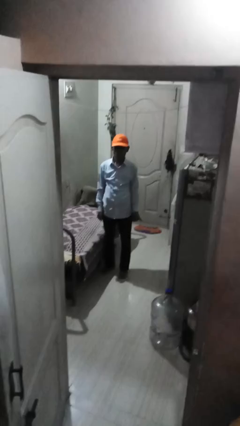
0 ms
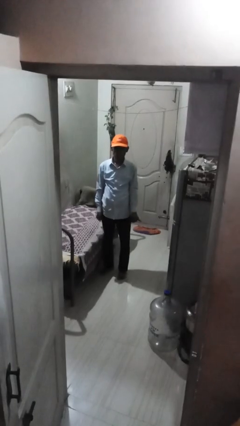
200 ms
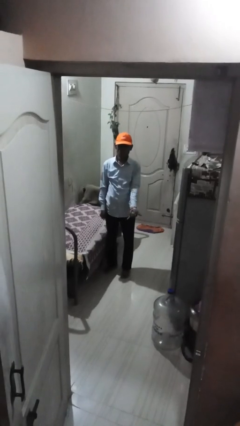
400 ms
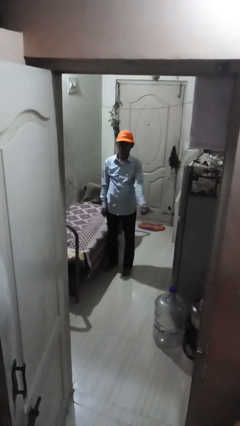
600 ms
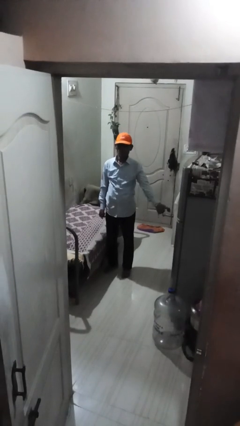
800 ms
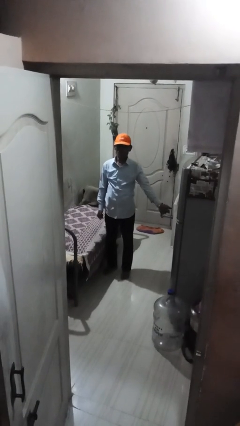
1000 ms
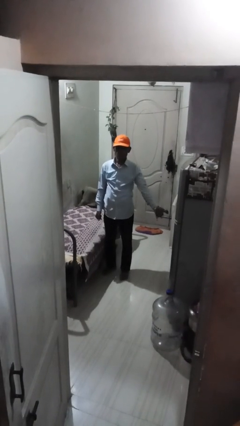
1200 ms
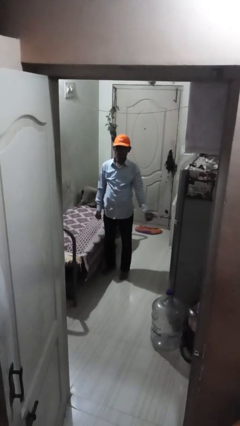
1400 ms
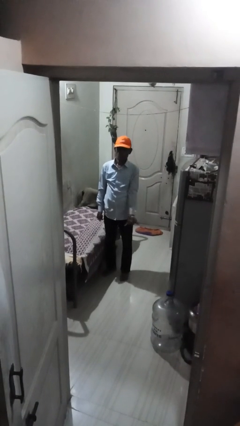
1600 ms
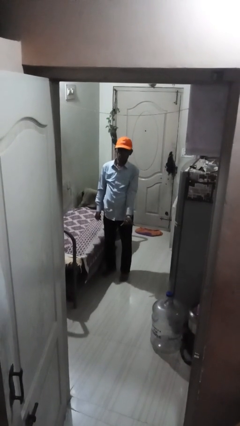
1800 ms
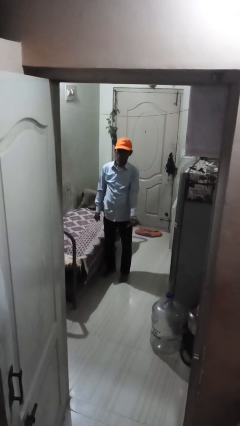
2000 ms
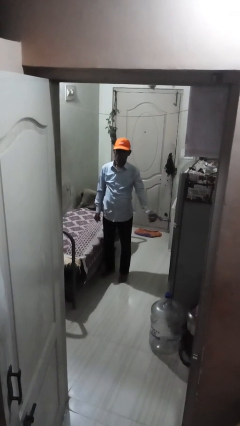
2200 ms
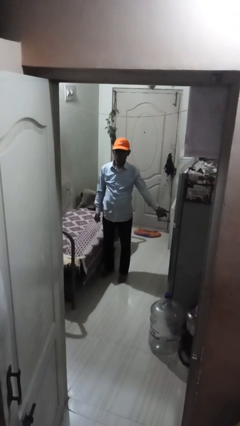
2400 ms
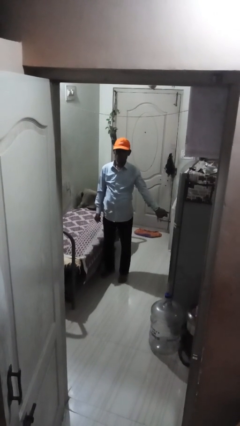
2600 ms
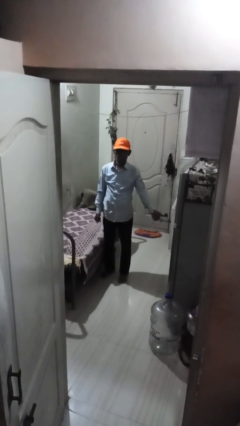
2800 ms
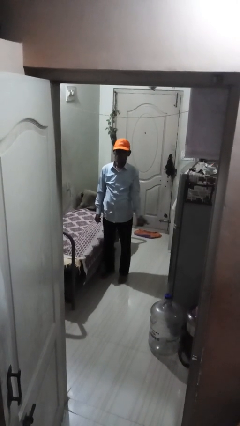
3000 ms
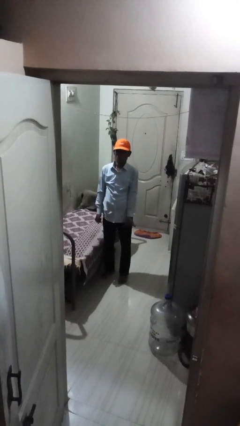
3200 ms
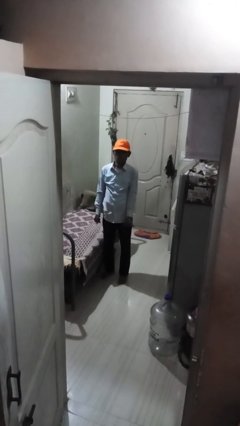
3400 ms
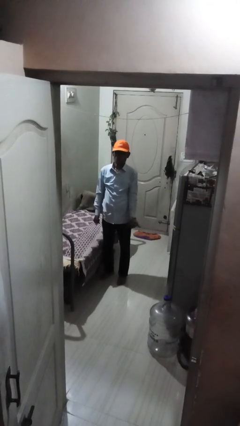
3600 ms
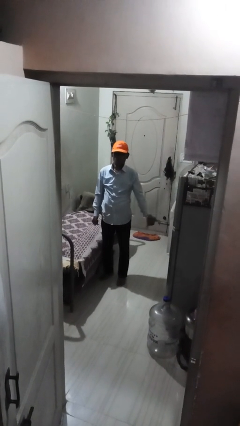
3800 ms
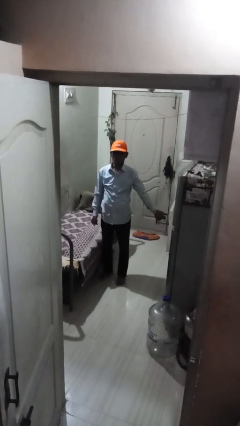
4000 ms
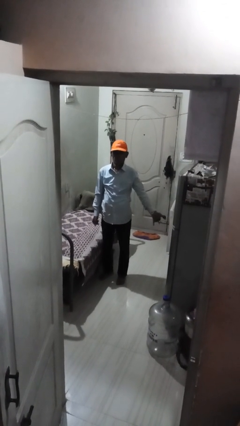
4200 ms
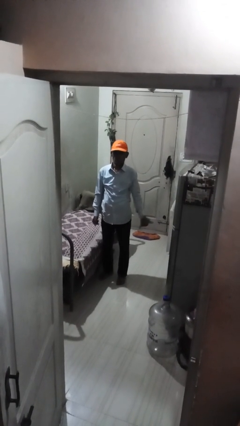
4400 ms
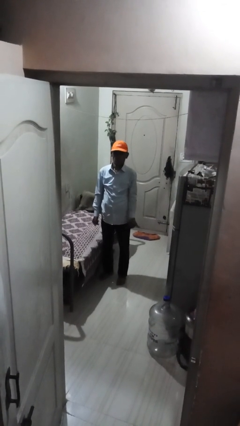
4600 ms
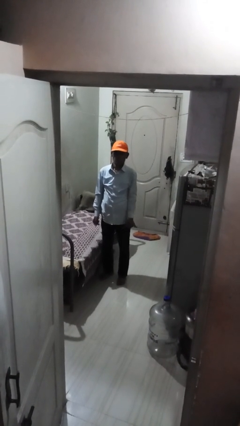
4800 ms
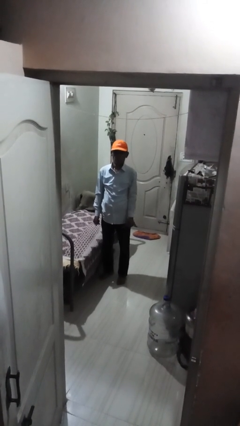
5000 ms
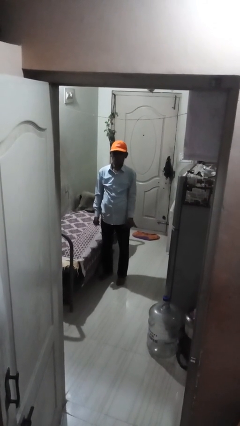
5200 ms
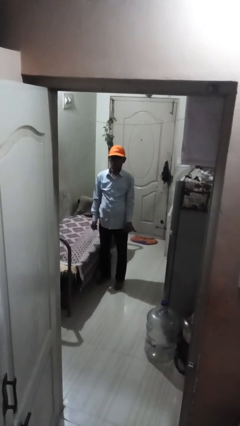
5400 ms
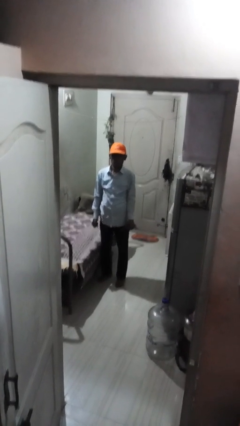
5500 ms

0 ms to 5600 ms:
person gestures hang loose

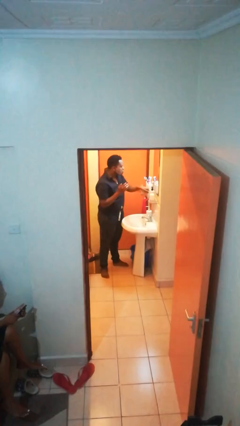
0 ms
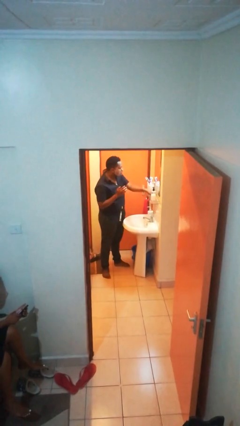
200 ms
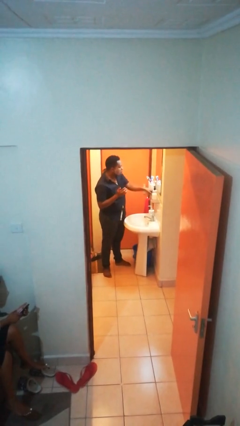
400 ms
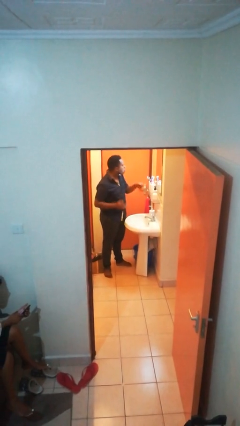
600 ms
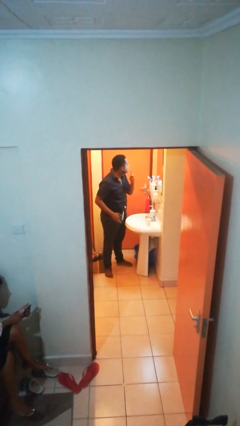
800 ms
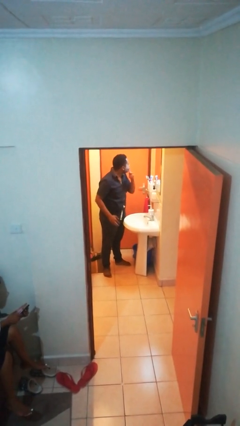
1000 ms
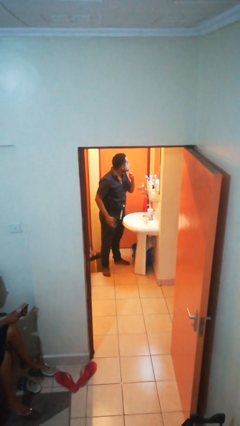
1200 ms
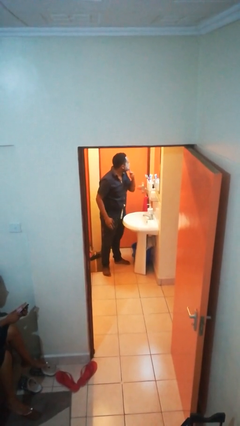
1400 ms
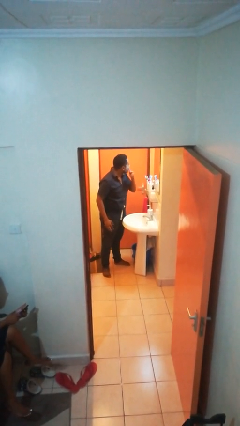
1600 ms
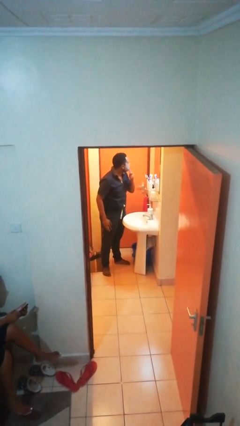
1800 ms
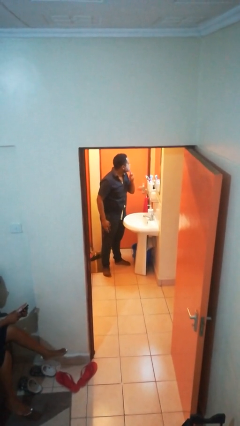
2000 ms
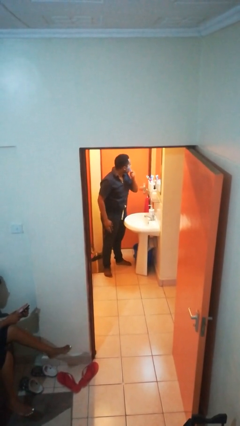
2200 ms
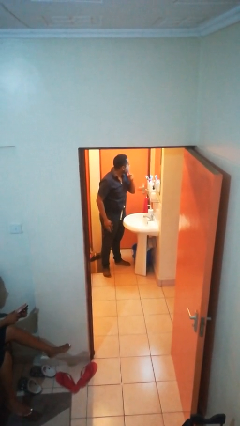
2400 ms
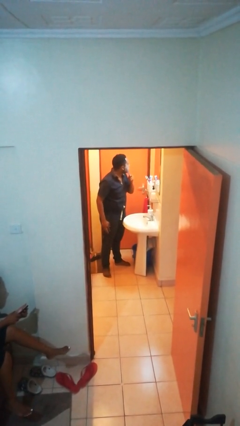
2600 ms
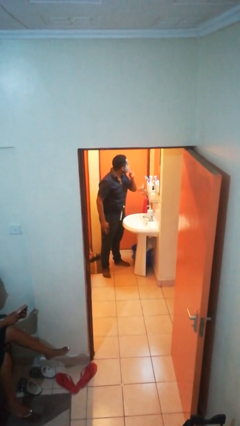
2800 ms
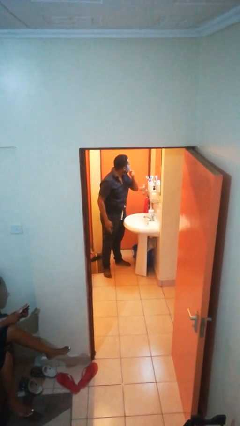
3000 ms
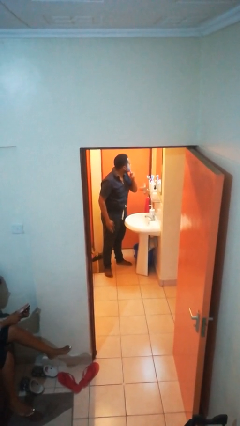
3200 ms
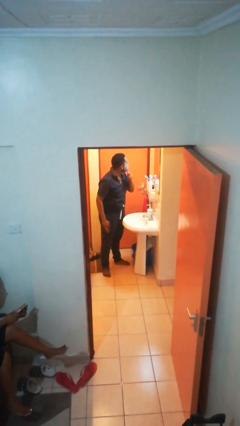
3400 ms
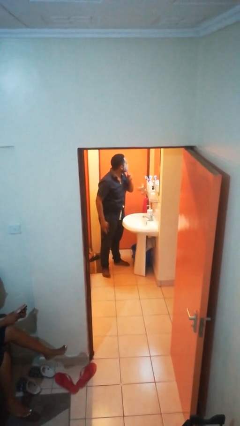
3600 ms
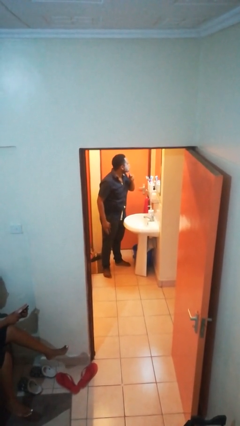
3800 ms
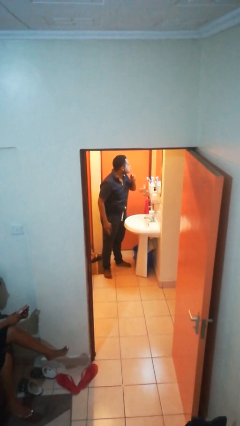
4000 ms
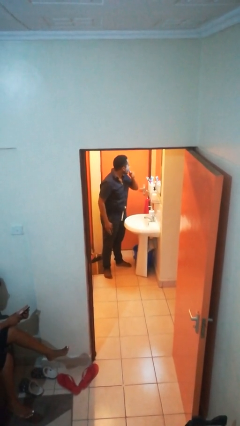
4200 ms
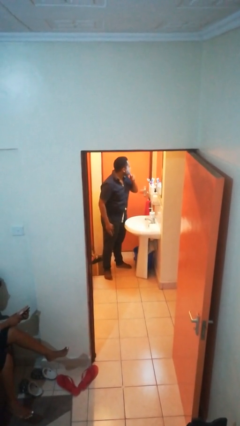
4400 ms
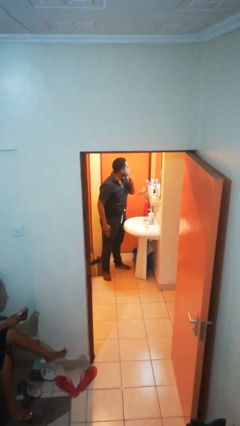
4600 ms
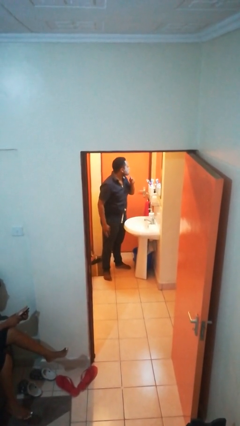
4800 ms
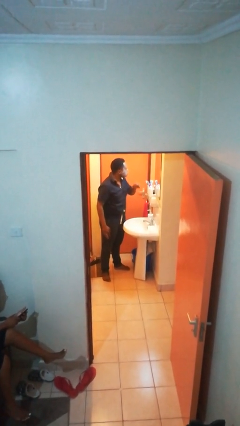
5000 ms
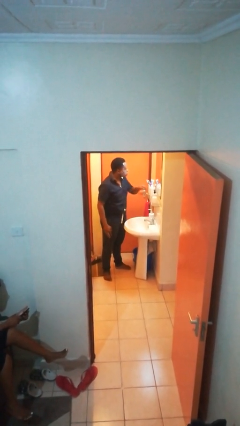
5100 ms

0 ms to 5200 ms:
person shaves face

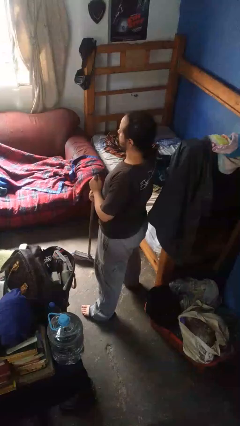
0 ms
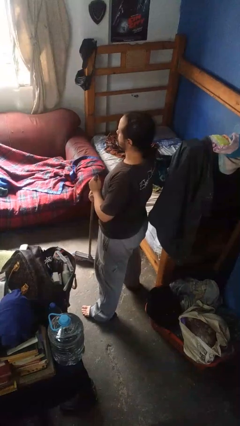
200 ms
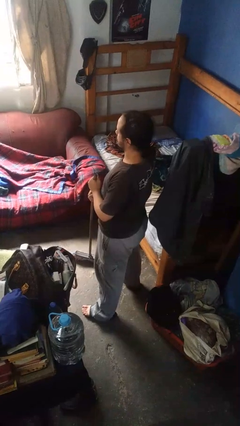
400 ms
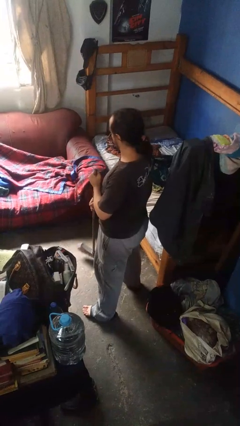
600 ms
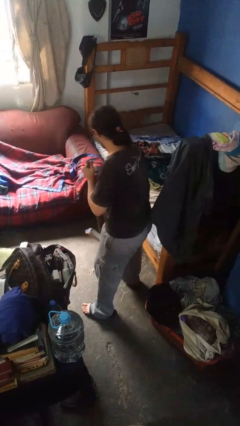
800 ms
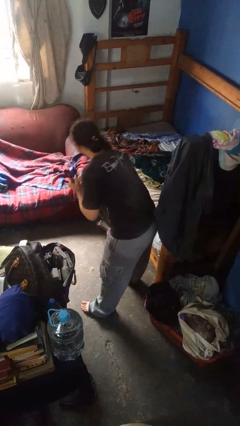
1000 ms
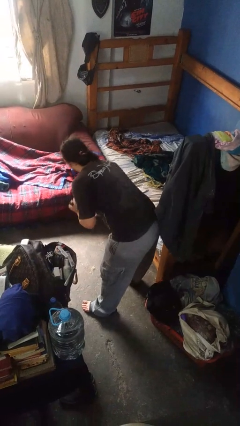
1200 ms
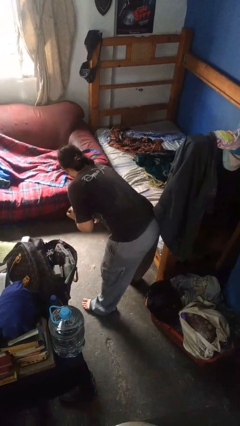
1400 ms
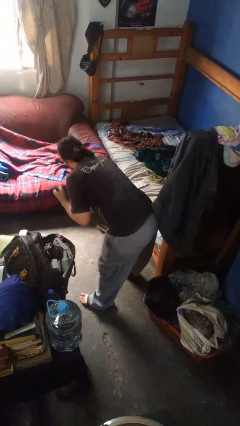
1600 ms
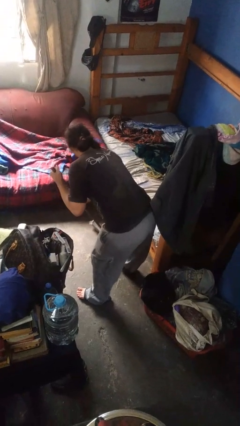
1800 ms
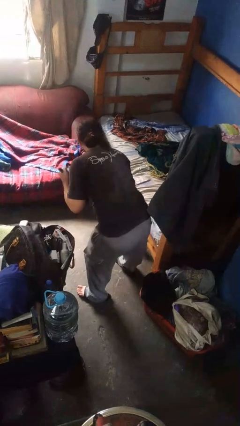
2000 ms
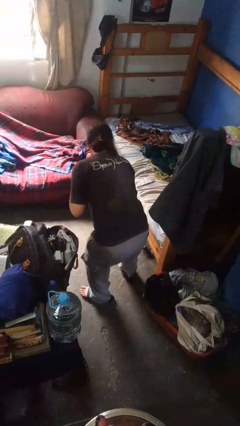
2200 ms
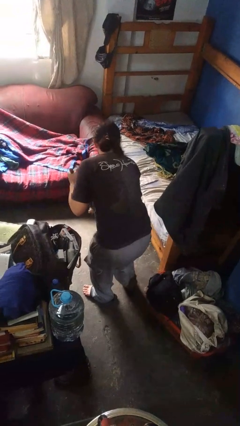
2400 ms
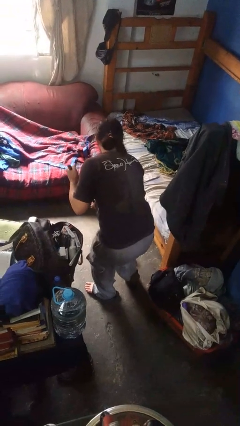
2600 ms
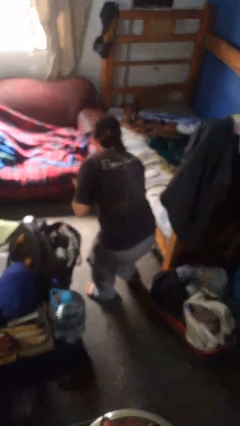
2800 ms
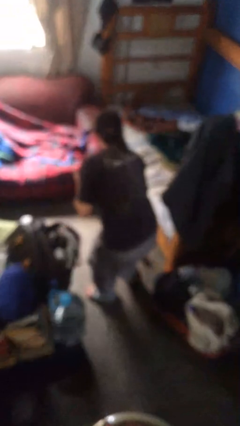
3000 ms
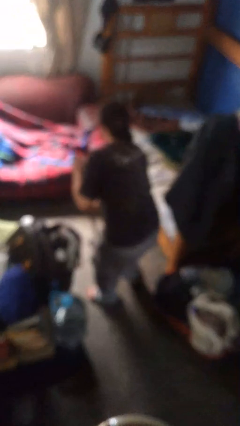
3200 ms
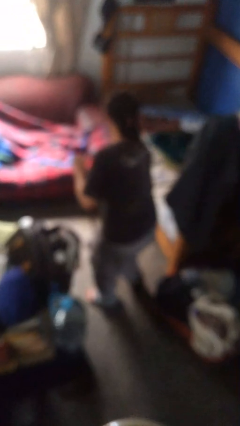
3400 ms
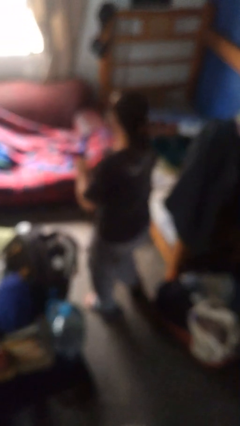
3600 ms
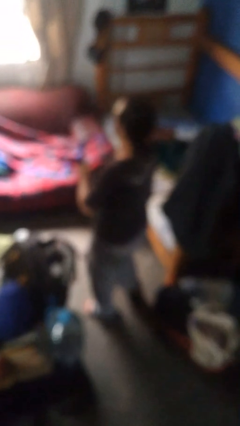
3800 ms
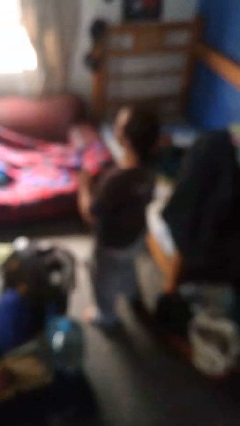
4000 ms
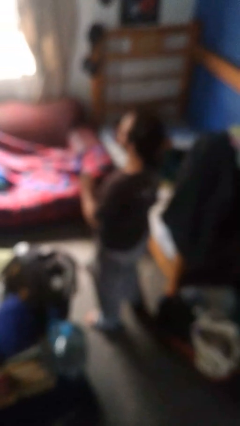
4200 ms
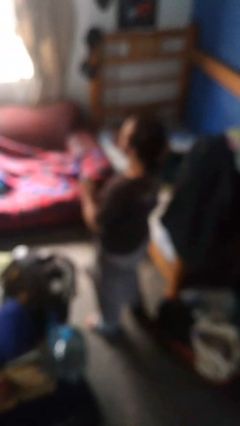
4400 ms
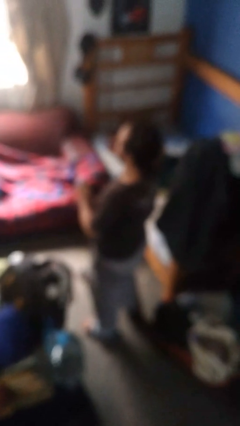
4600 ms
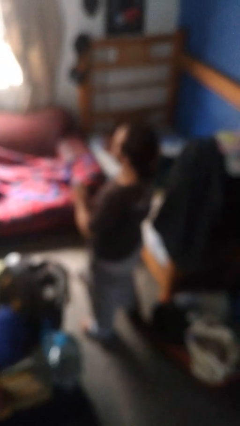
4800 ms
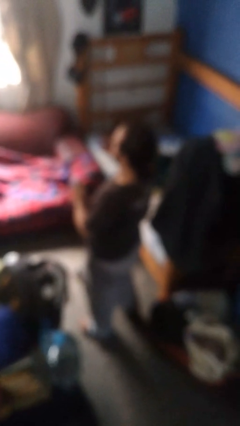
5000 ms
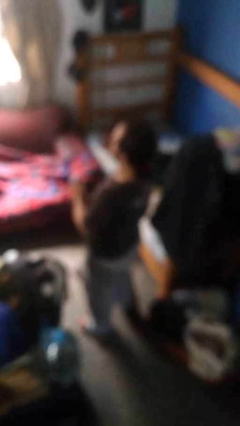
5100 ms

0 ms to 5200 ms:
person sweeps floor

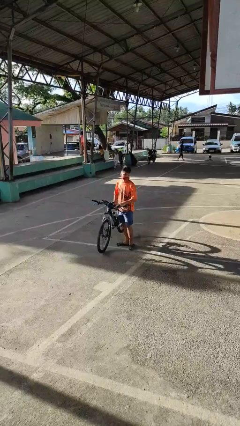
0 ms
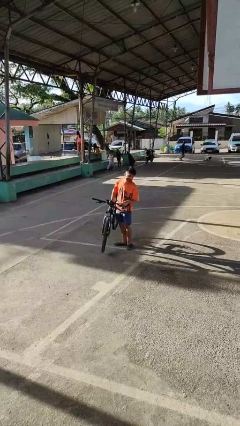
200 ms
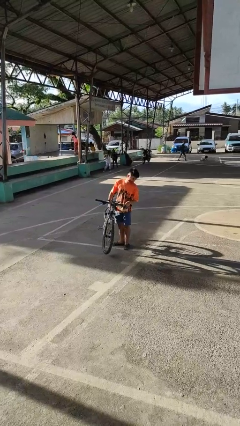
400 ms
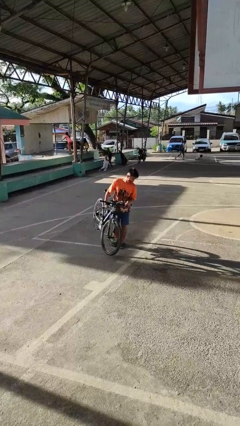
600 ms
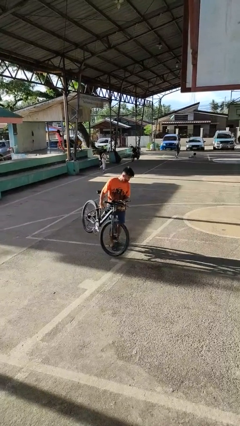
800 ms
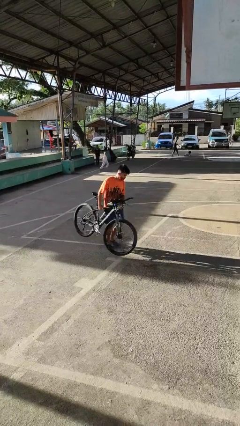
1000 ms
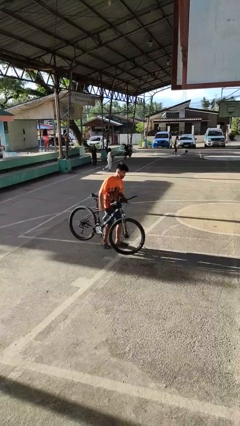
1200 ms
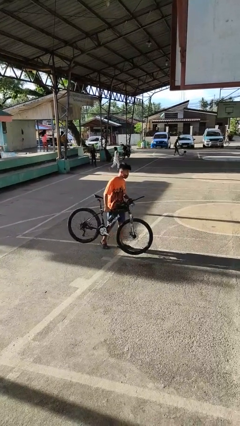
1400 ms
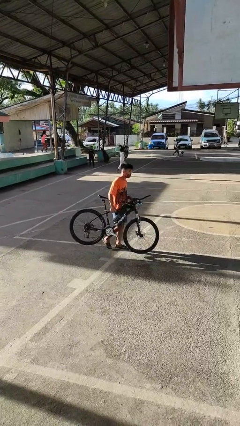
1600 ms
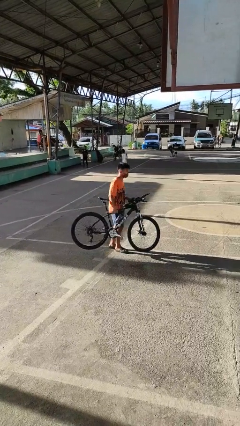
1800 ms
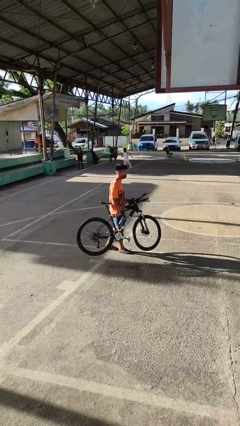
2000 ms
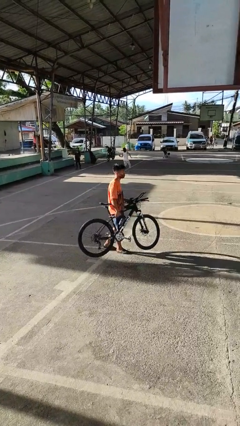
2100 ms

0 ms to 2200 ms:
person carries bicycle
